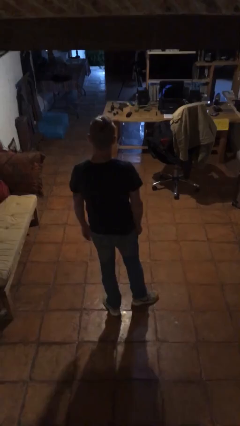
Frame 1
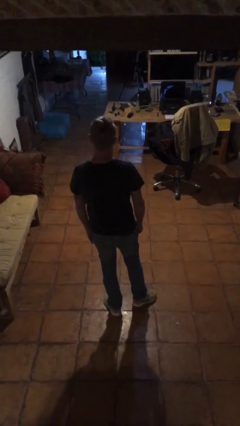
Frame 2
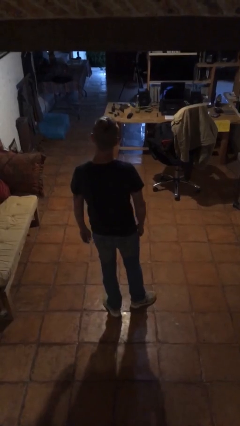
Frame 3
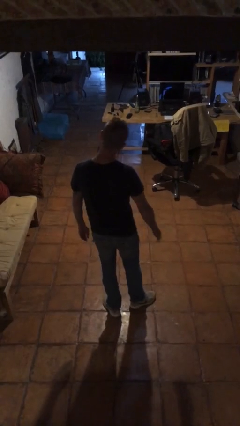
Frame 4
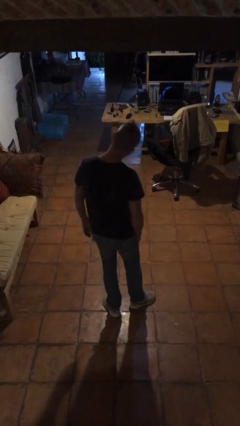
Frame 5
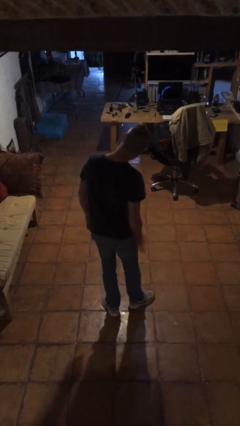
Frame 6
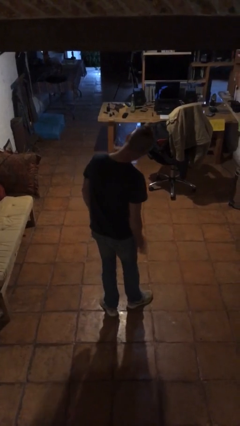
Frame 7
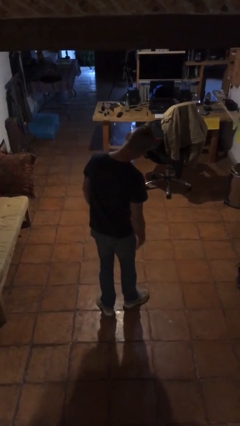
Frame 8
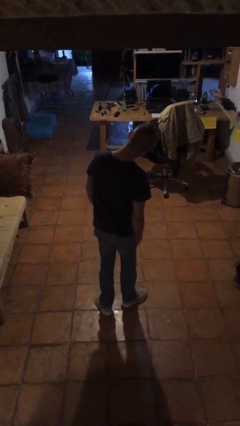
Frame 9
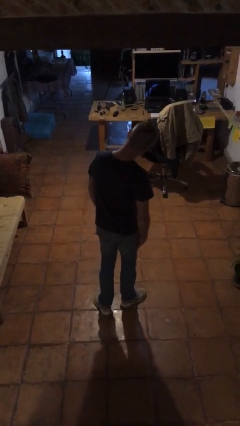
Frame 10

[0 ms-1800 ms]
person slaps hands on thighs

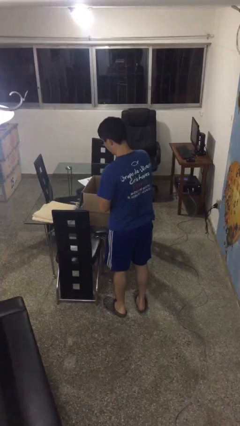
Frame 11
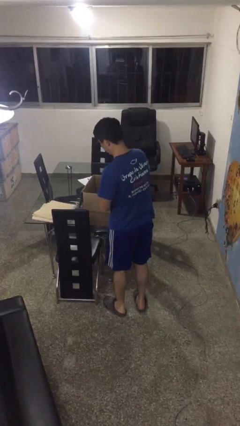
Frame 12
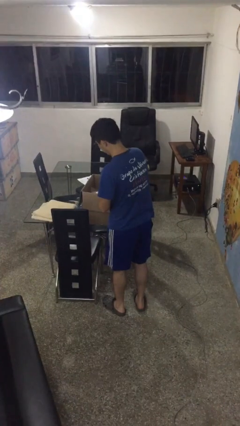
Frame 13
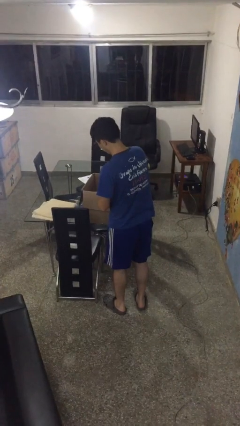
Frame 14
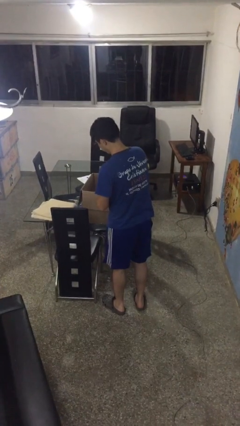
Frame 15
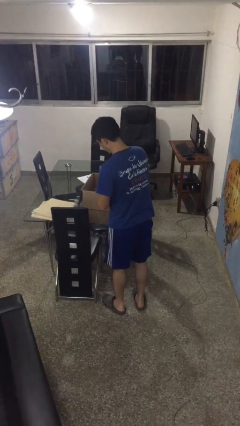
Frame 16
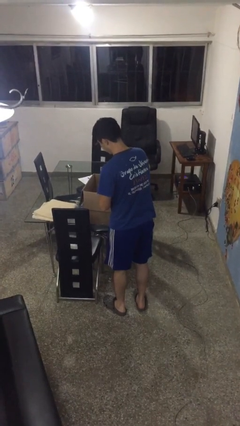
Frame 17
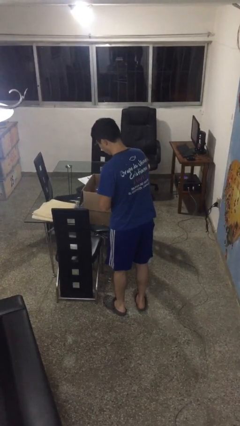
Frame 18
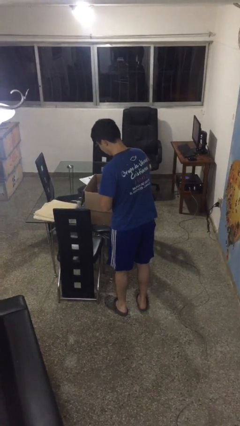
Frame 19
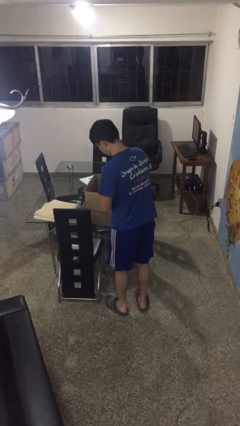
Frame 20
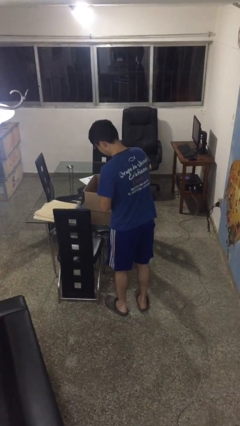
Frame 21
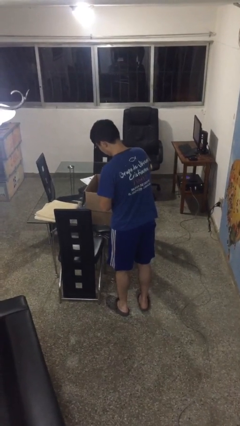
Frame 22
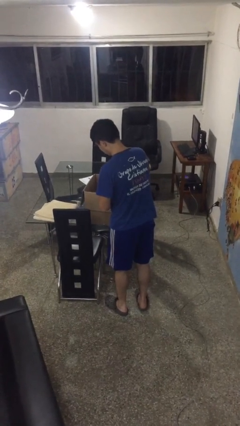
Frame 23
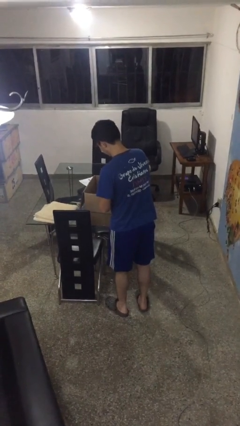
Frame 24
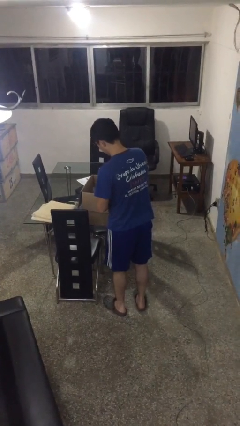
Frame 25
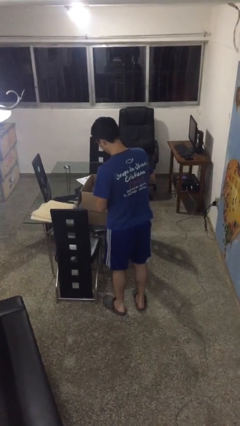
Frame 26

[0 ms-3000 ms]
person searches in box

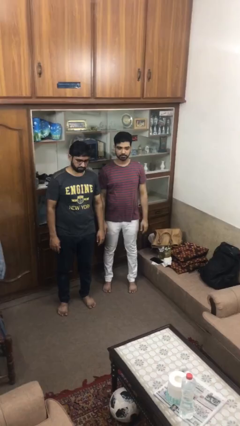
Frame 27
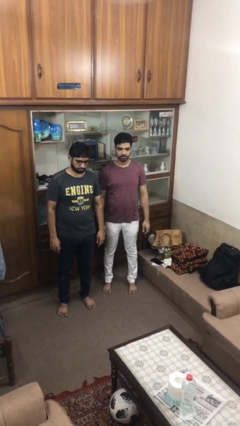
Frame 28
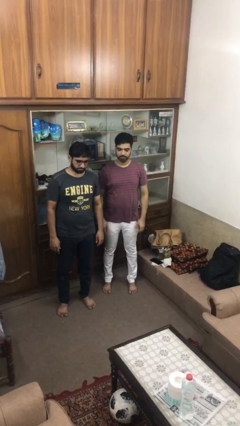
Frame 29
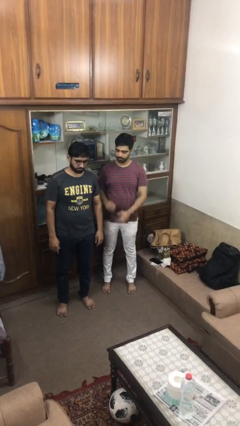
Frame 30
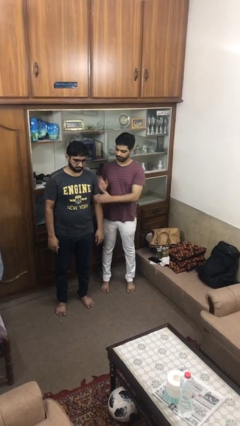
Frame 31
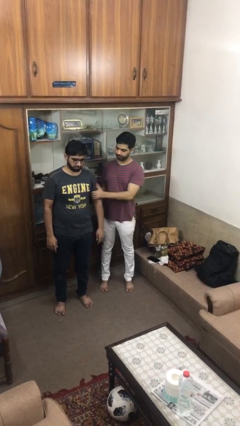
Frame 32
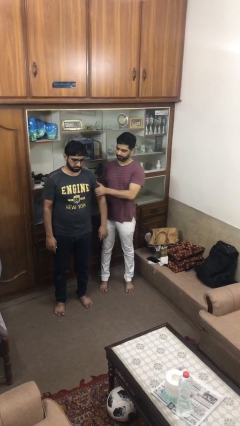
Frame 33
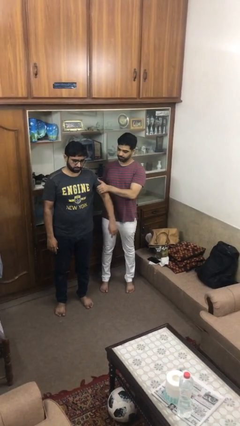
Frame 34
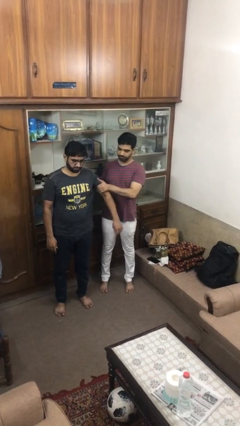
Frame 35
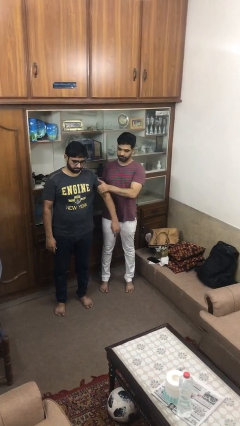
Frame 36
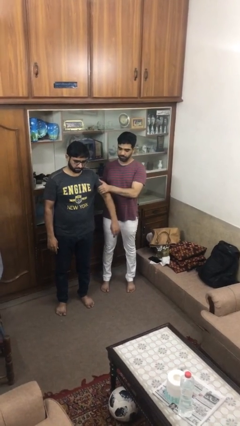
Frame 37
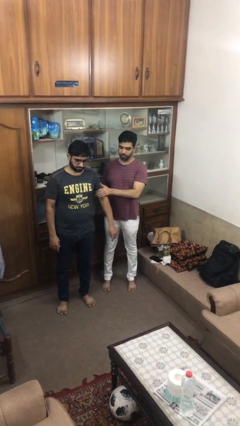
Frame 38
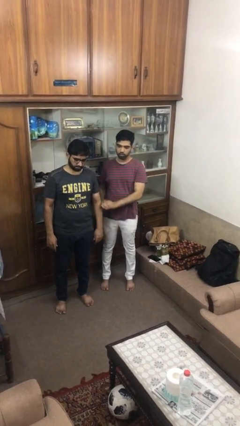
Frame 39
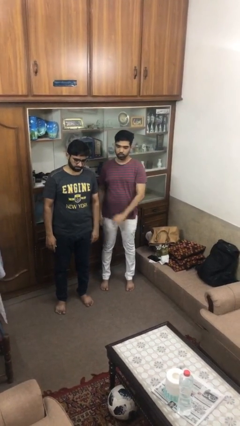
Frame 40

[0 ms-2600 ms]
person grabs person by bicep

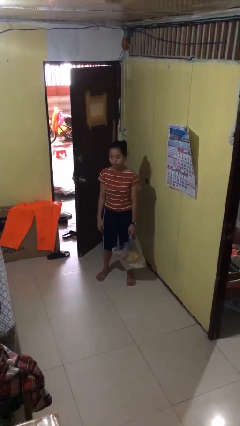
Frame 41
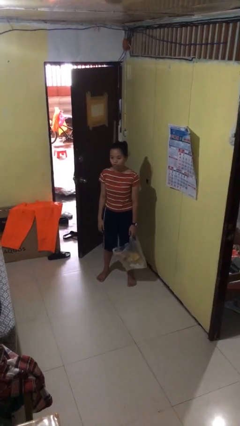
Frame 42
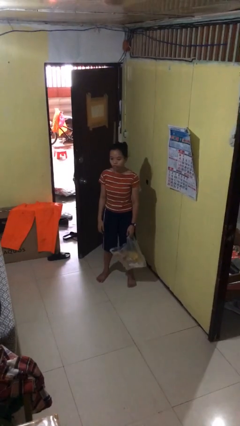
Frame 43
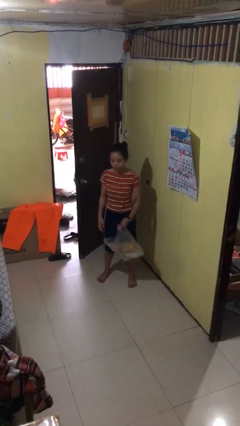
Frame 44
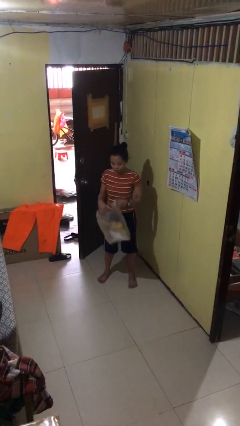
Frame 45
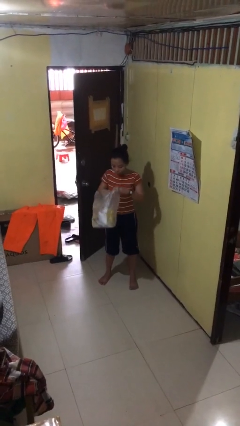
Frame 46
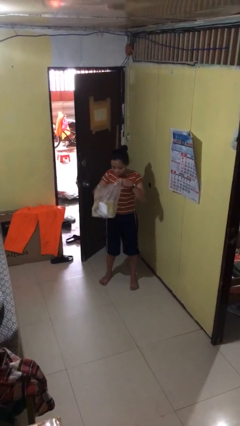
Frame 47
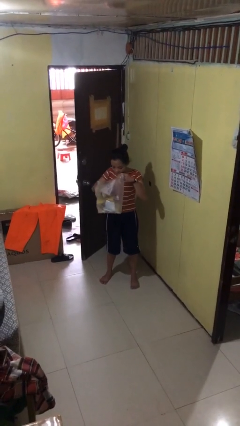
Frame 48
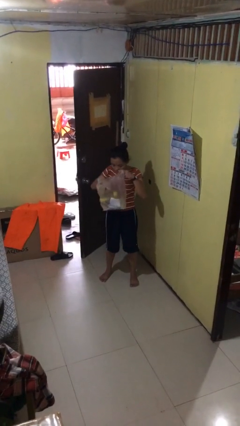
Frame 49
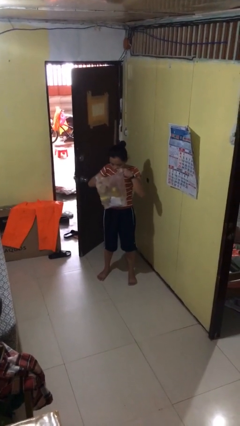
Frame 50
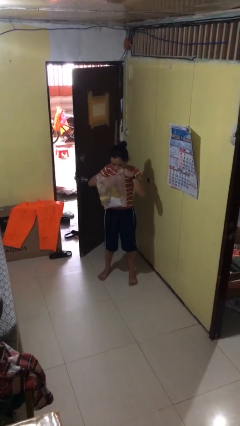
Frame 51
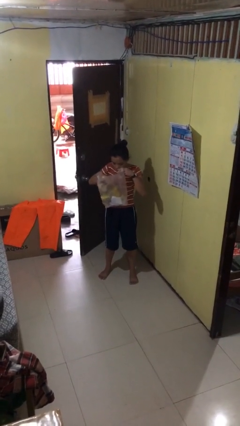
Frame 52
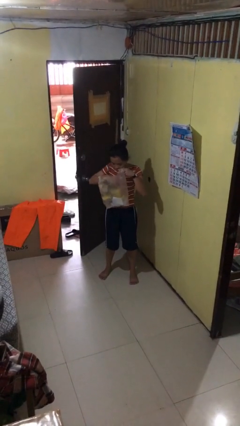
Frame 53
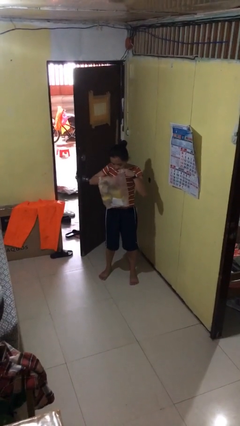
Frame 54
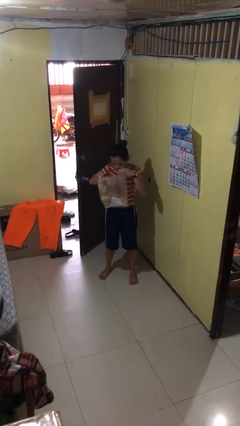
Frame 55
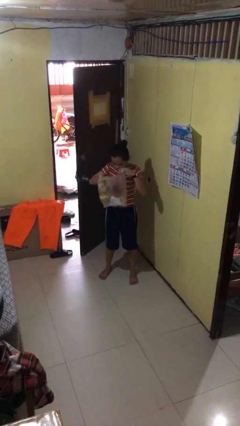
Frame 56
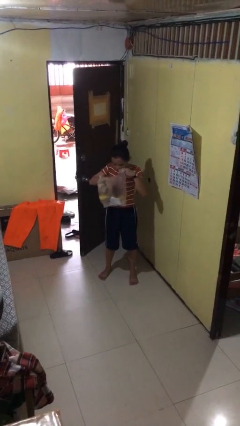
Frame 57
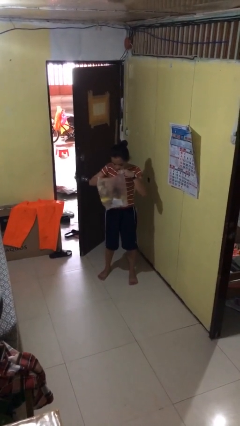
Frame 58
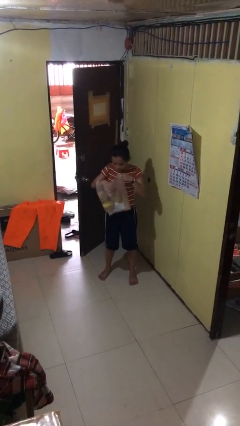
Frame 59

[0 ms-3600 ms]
person searches in bag

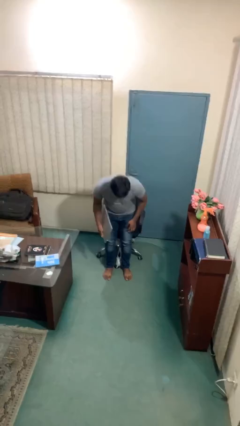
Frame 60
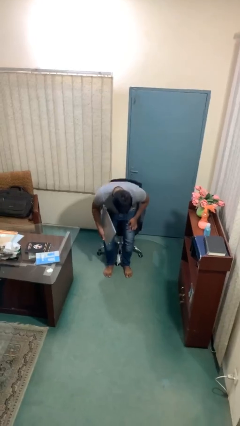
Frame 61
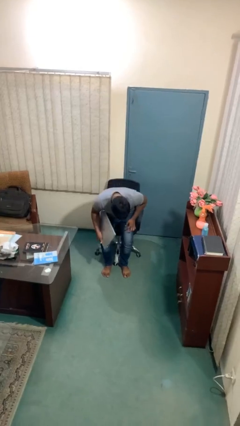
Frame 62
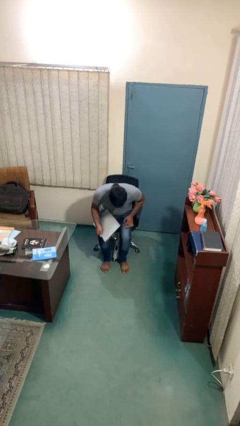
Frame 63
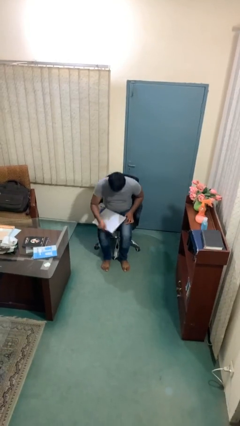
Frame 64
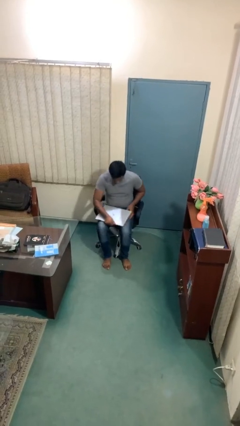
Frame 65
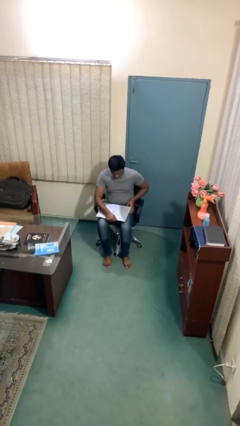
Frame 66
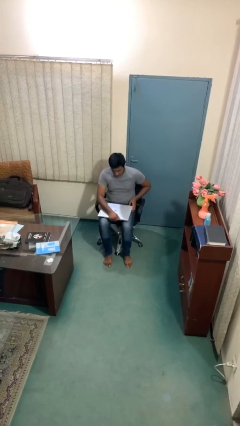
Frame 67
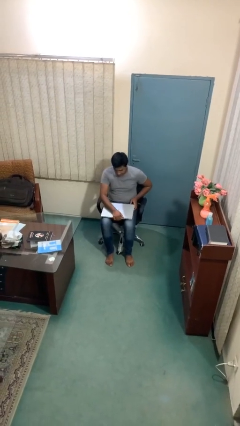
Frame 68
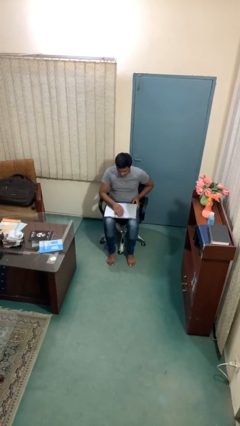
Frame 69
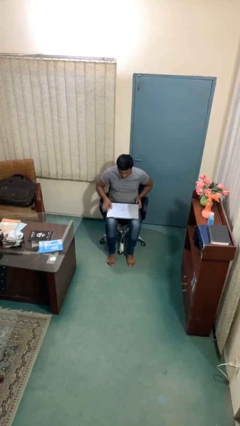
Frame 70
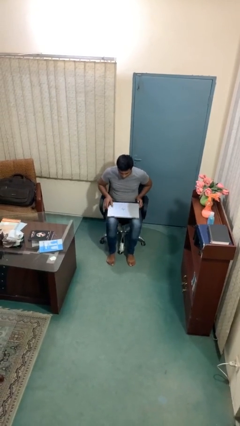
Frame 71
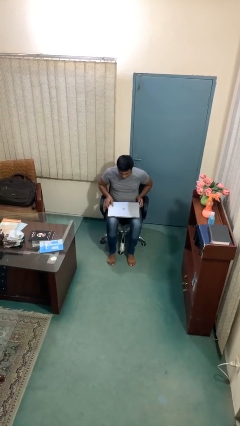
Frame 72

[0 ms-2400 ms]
person sits down

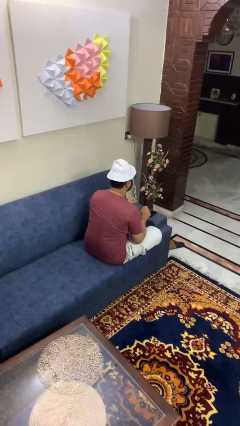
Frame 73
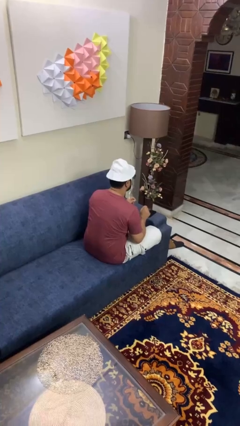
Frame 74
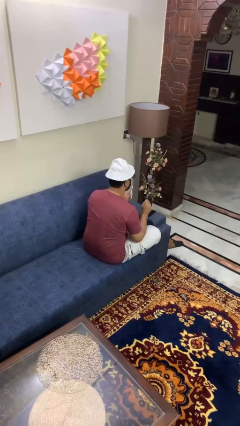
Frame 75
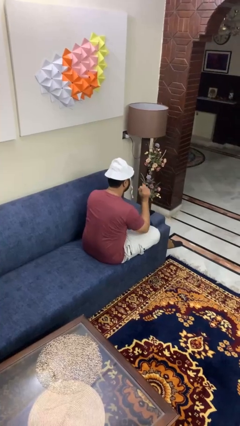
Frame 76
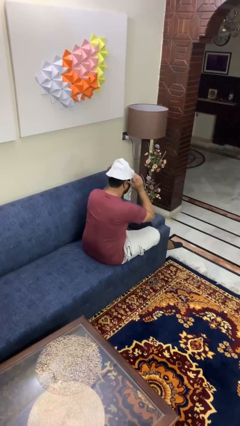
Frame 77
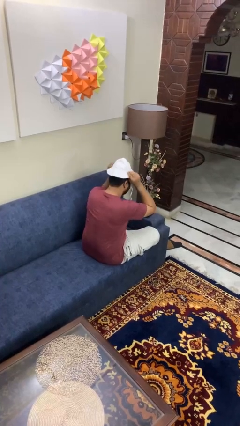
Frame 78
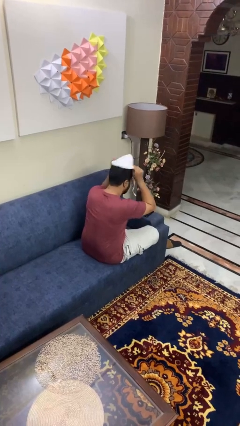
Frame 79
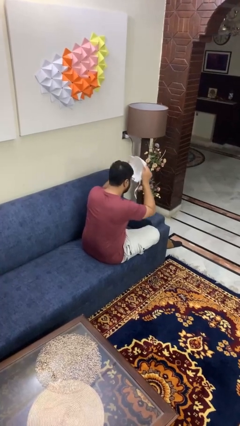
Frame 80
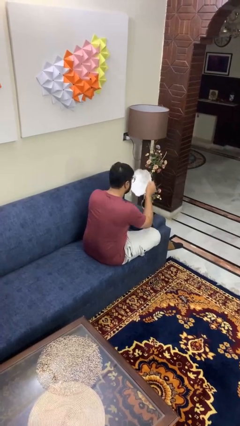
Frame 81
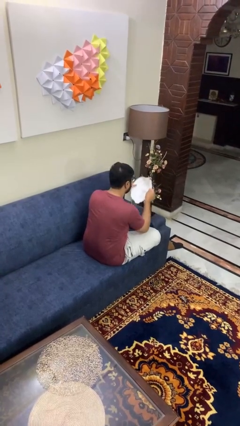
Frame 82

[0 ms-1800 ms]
person takes off hat

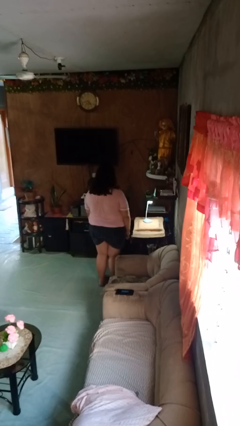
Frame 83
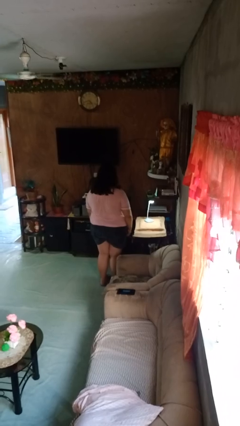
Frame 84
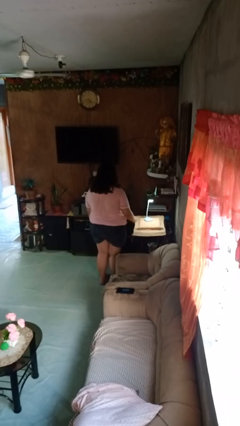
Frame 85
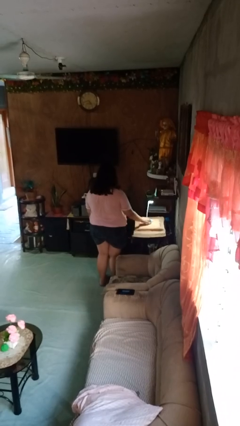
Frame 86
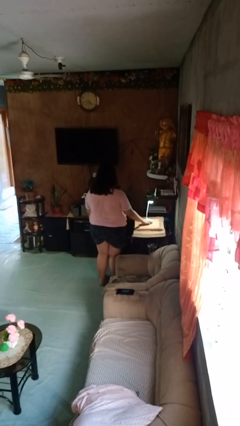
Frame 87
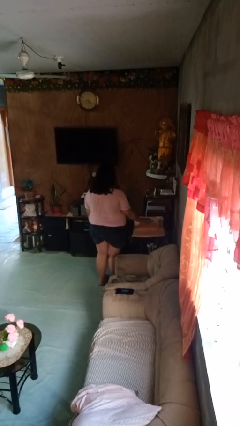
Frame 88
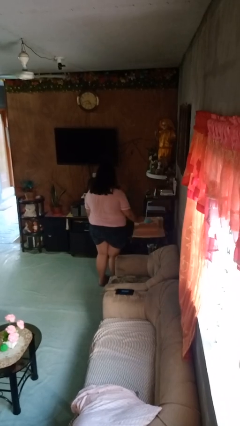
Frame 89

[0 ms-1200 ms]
person turns off lamp

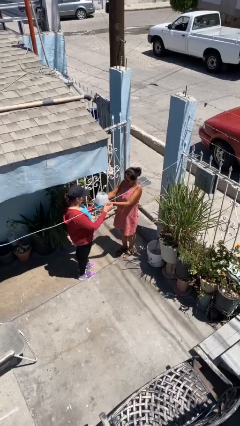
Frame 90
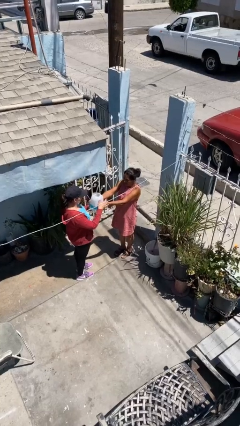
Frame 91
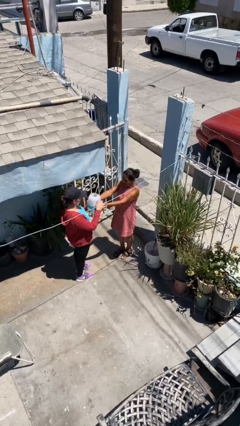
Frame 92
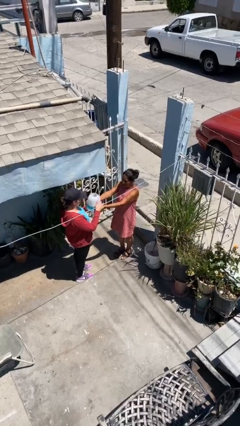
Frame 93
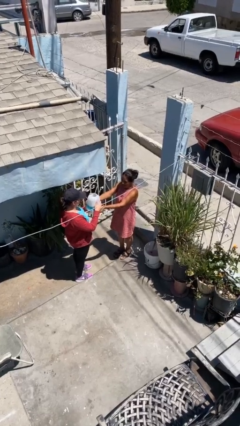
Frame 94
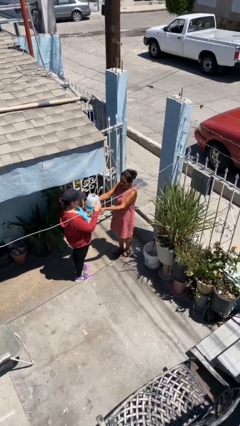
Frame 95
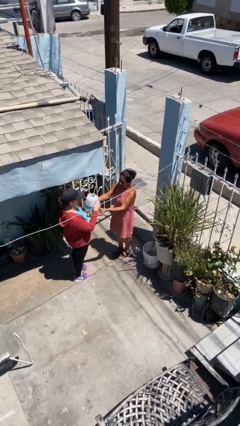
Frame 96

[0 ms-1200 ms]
person transfers object to person
